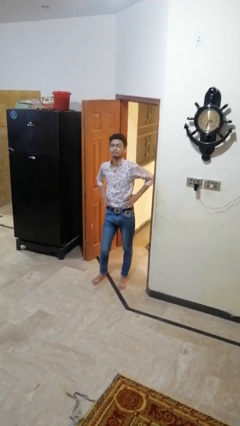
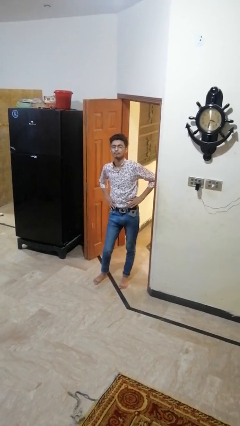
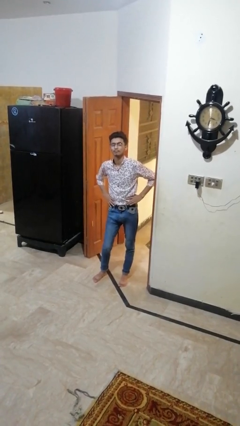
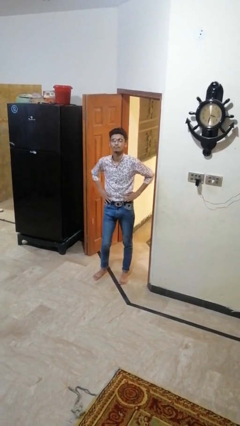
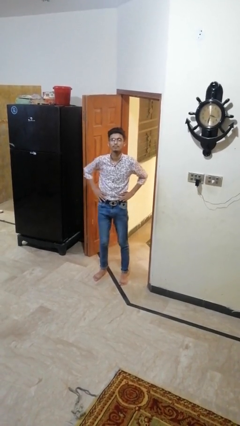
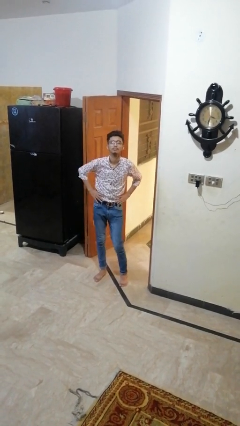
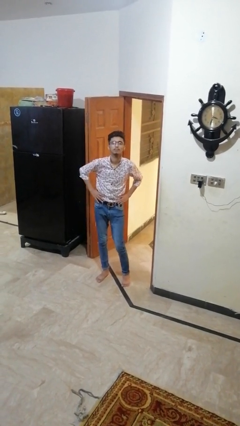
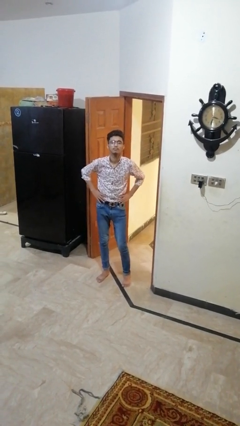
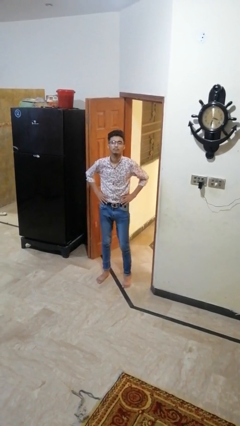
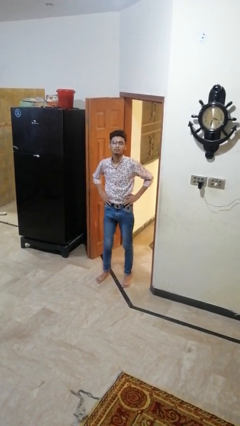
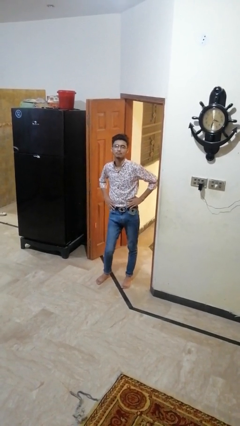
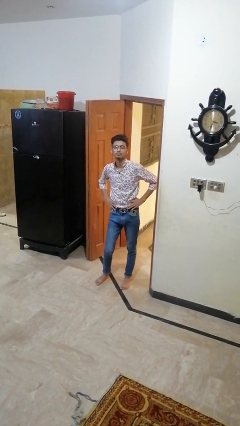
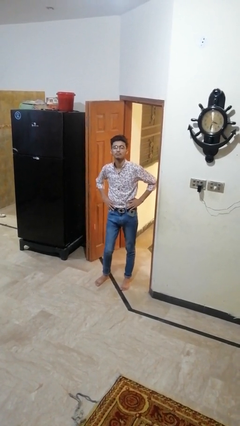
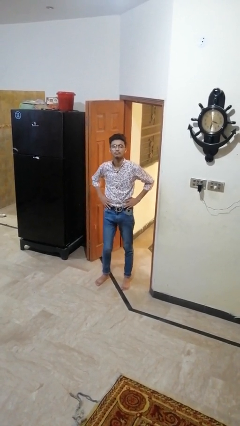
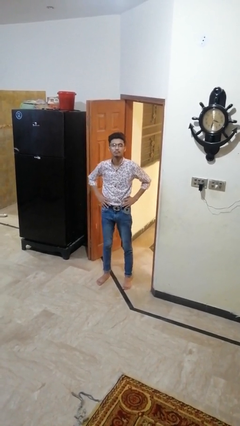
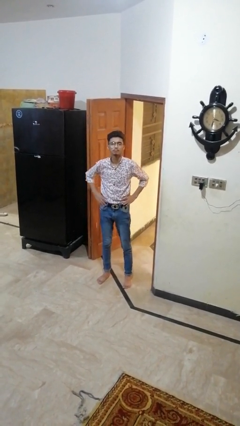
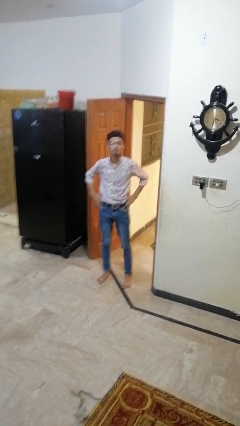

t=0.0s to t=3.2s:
person wiggles hips

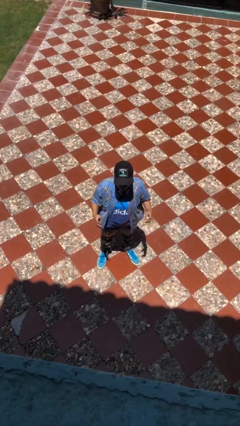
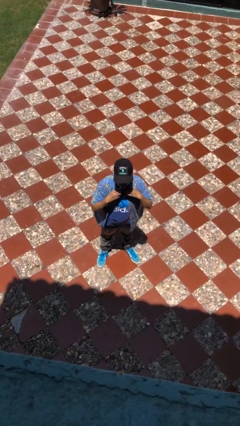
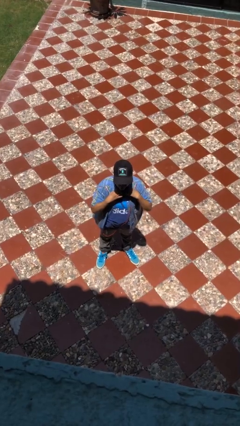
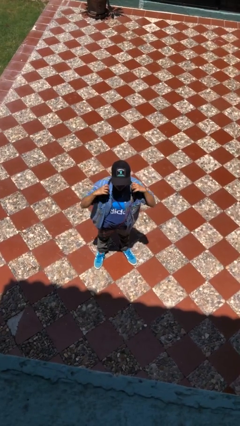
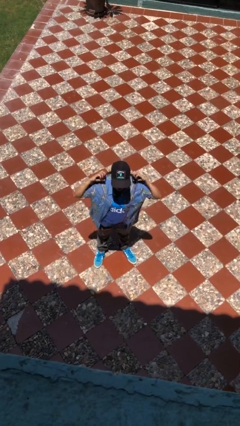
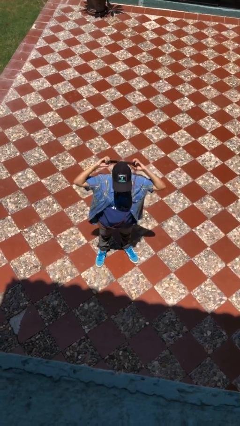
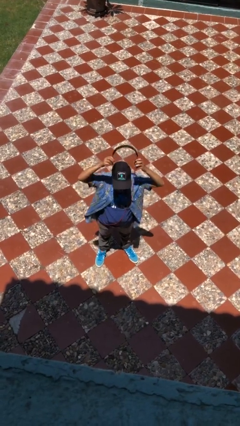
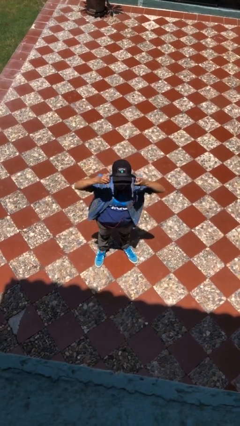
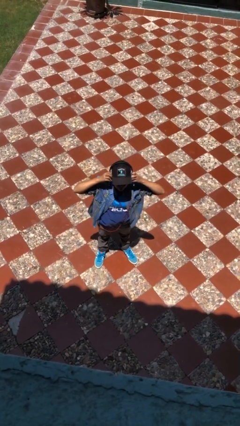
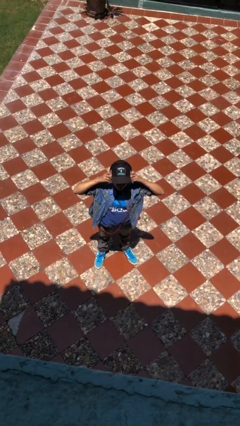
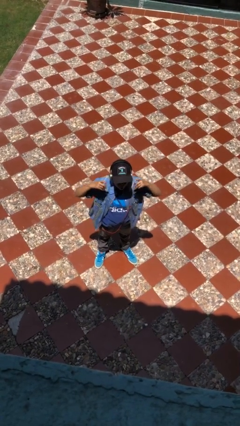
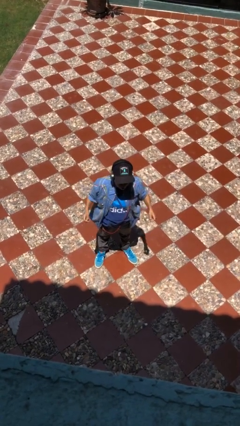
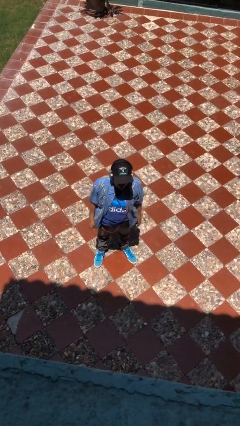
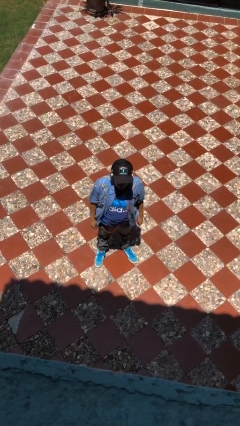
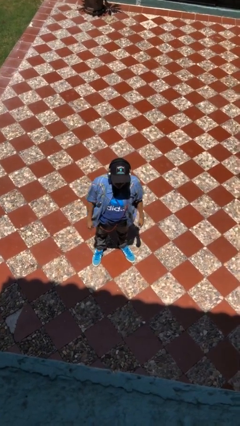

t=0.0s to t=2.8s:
person puts on headphones

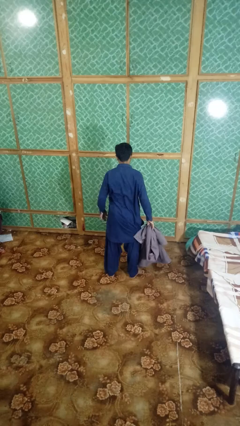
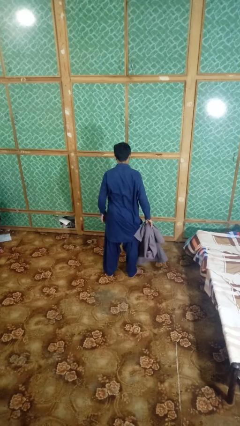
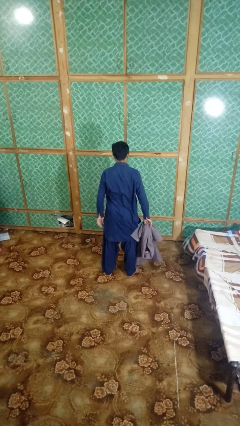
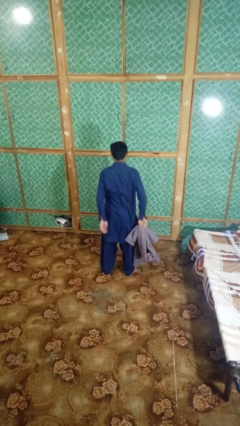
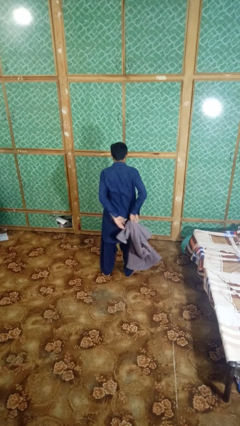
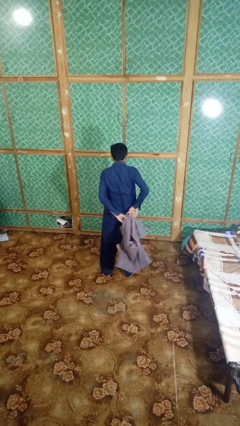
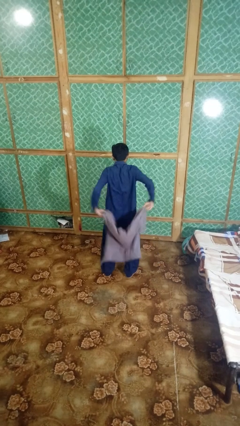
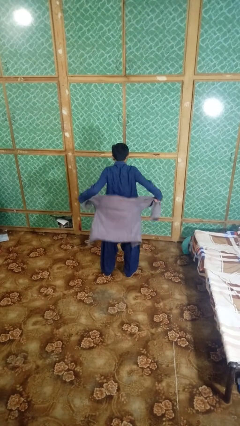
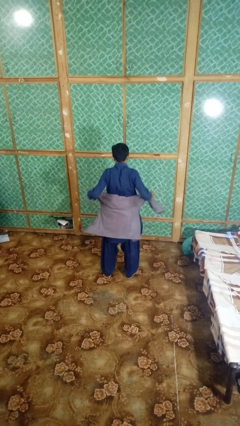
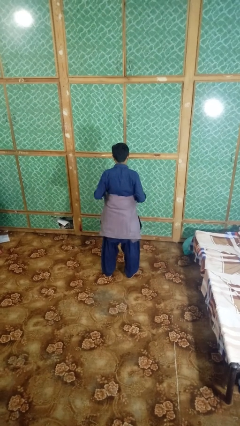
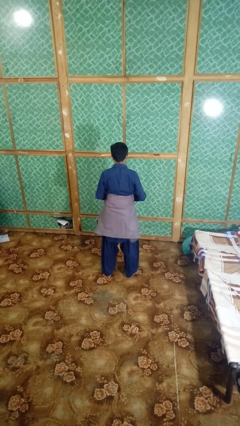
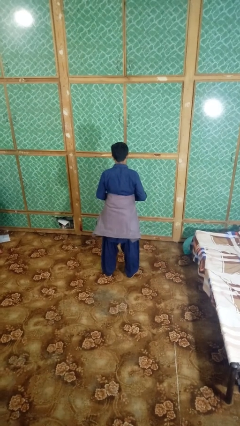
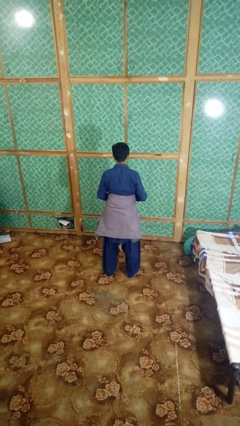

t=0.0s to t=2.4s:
person ties jacket around waist

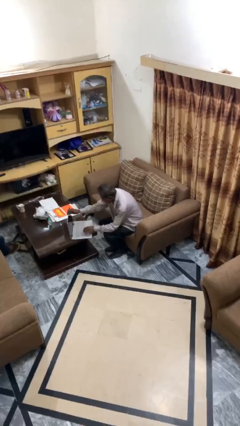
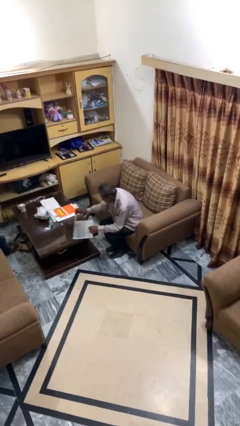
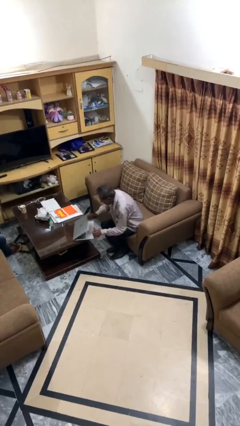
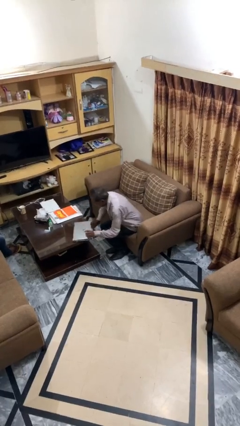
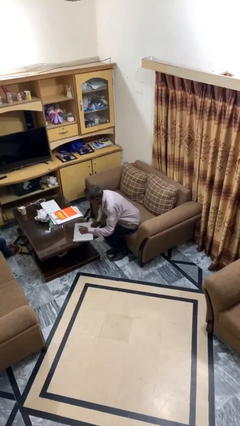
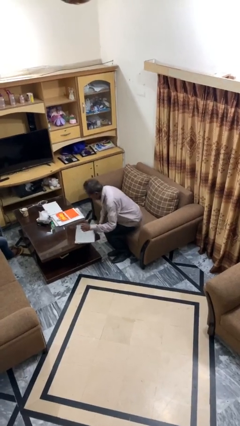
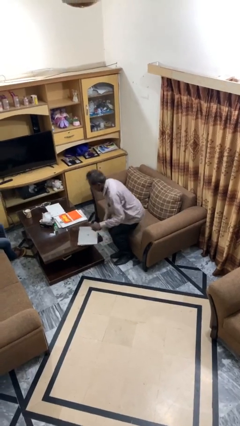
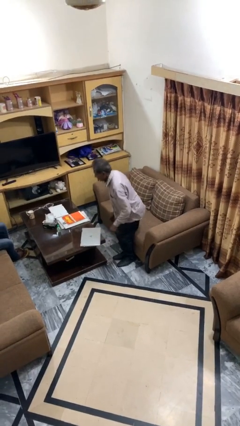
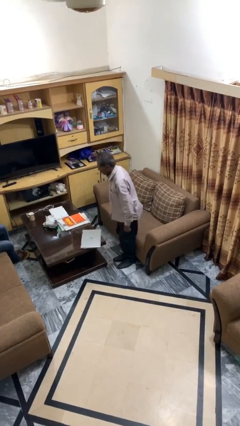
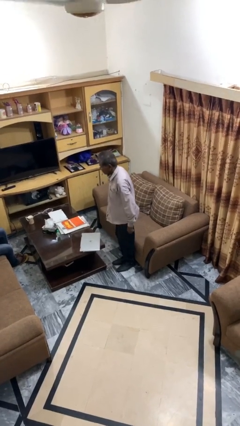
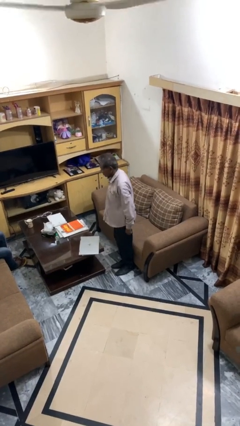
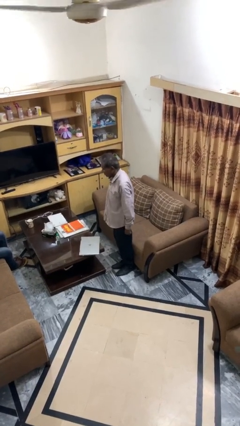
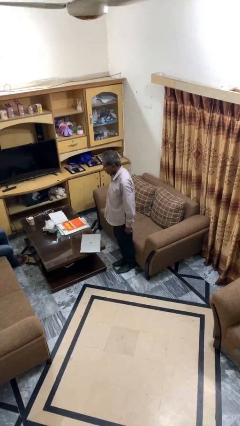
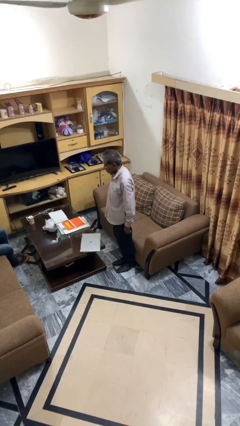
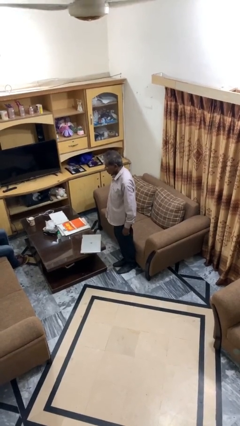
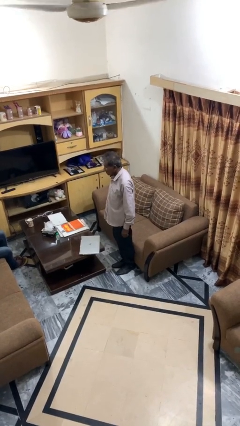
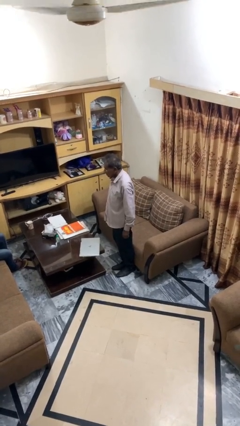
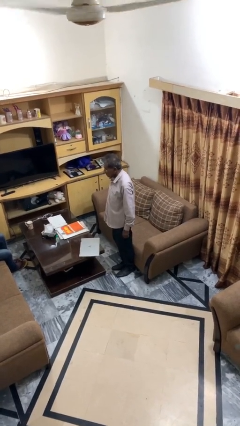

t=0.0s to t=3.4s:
person stands up

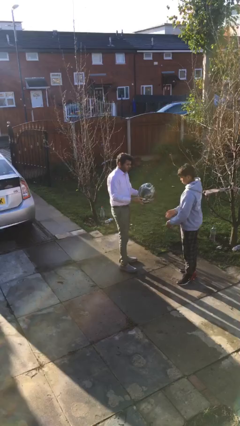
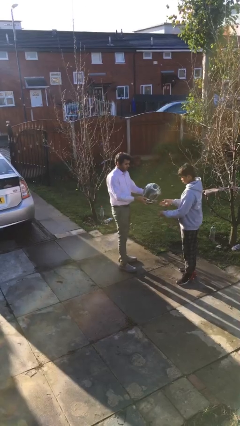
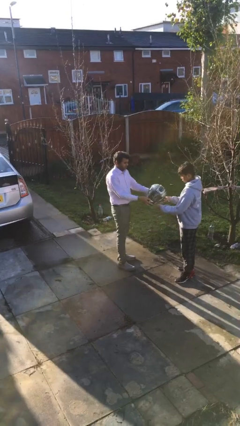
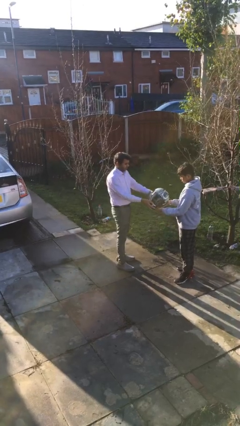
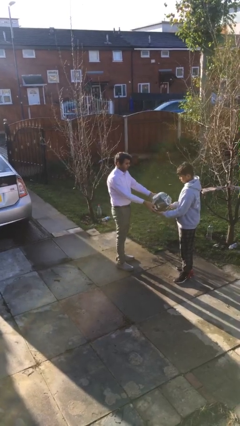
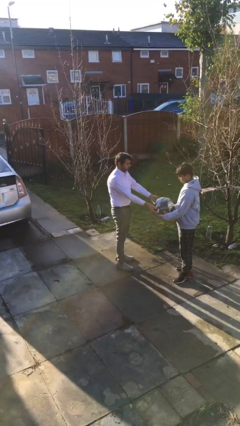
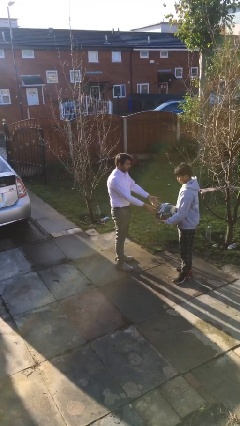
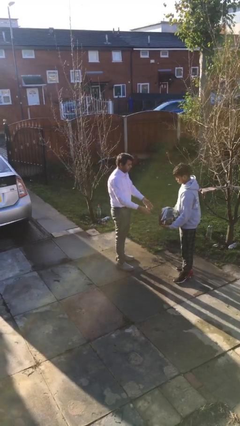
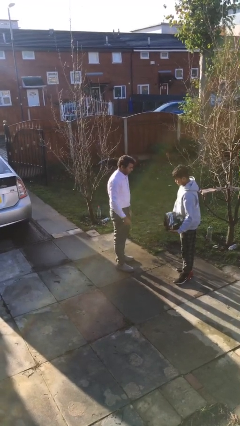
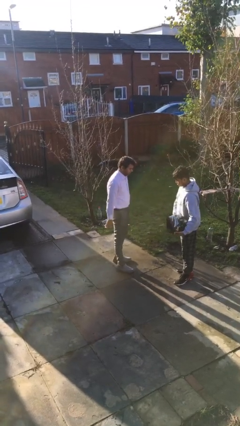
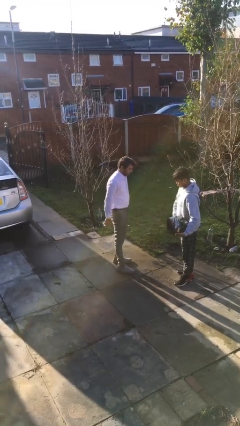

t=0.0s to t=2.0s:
person transfers object to person

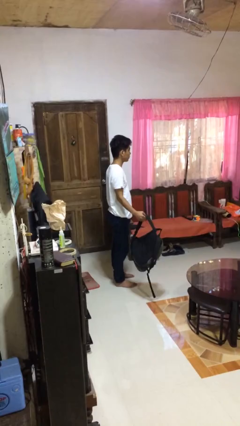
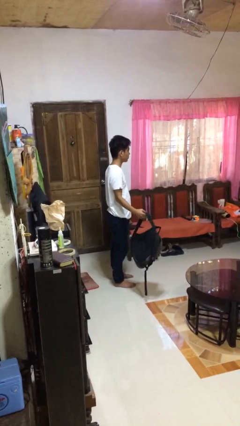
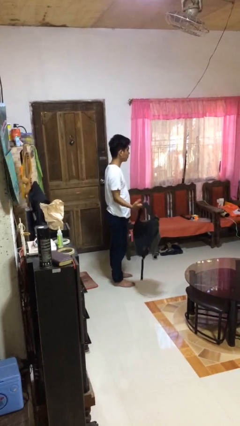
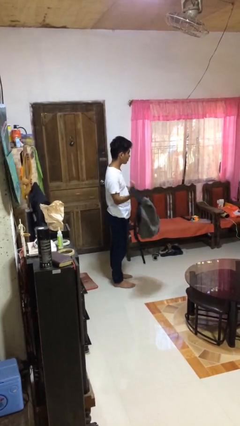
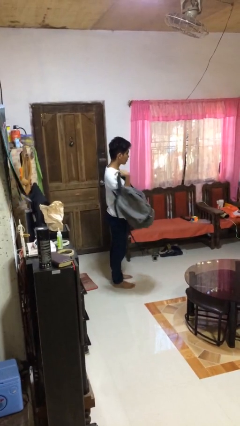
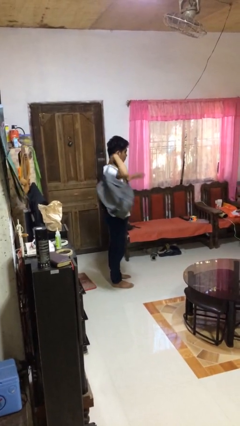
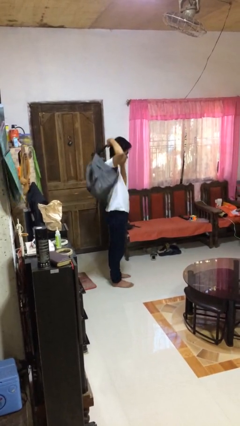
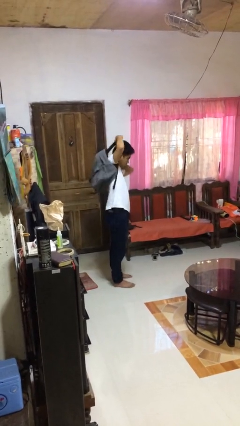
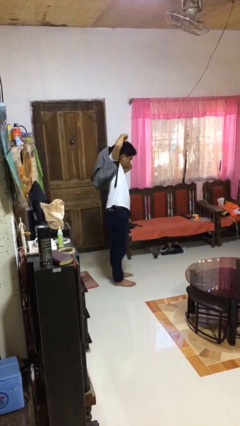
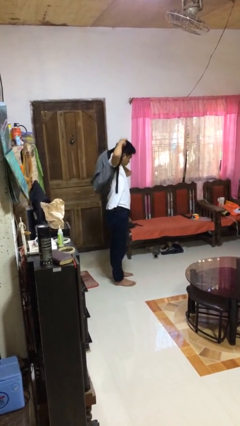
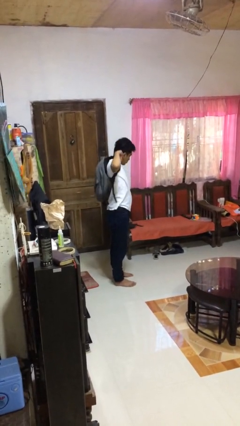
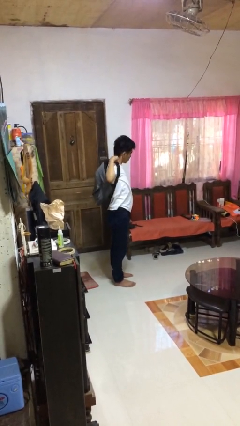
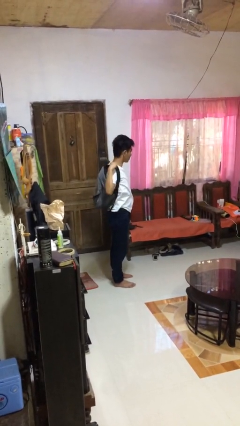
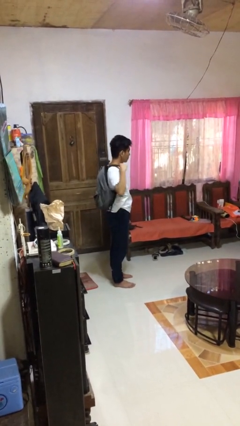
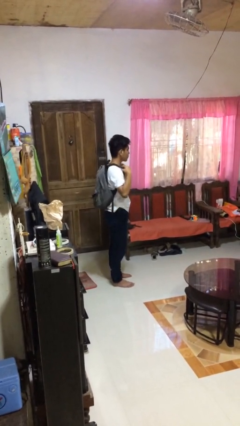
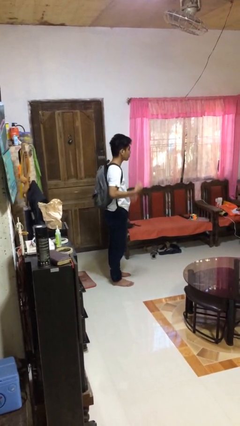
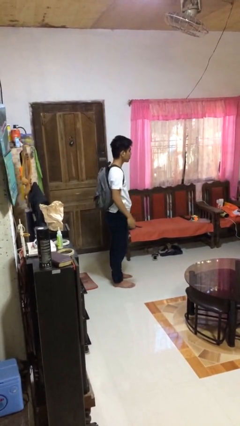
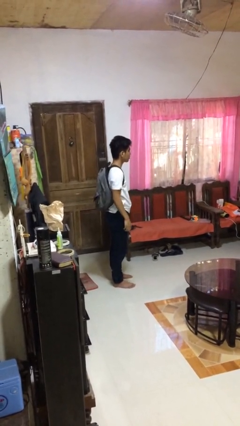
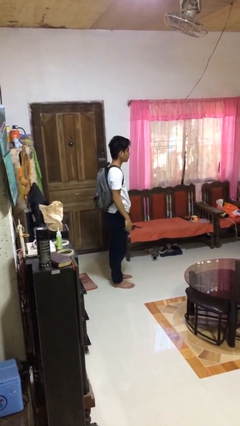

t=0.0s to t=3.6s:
person puts on backpack

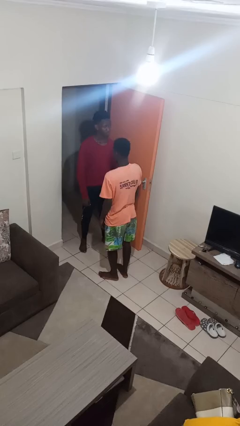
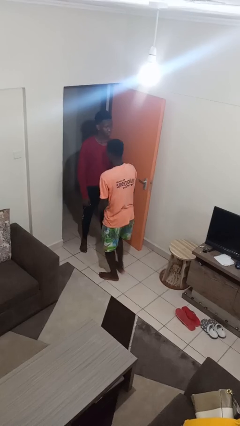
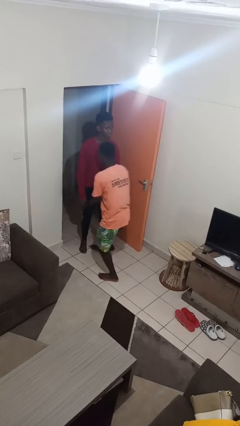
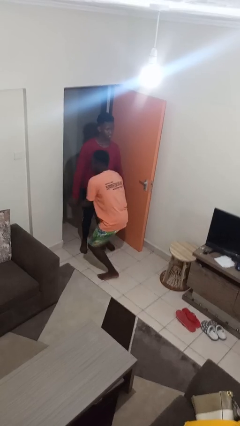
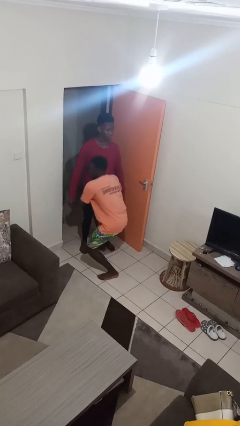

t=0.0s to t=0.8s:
person puts down person
